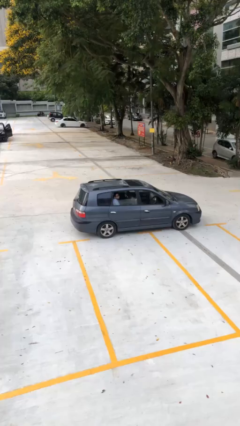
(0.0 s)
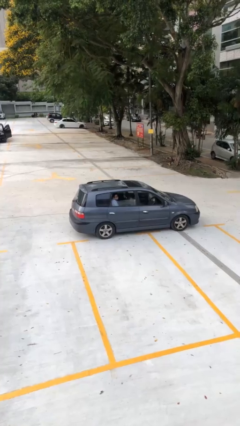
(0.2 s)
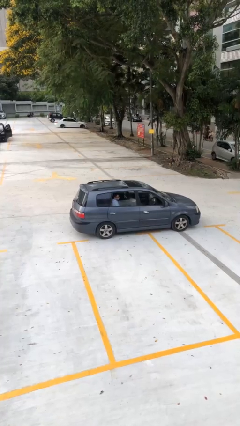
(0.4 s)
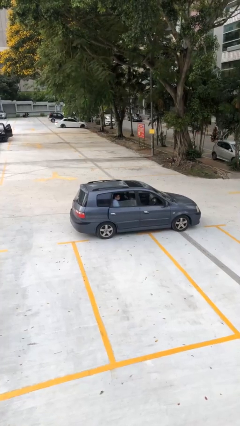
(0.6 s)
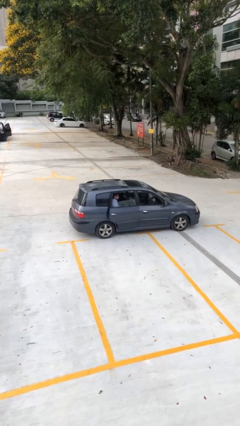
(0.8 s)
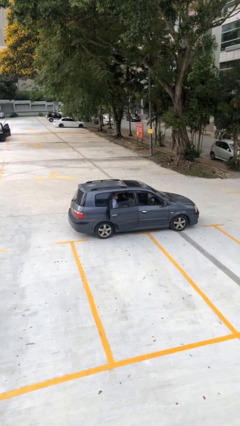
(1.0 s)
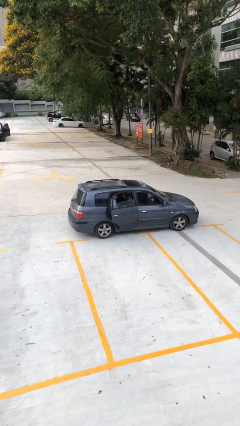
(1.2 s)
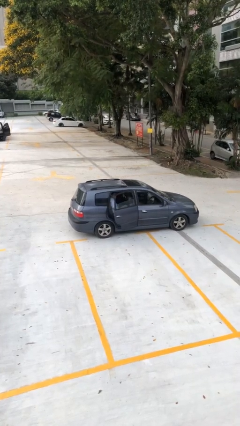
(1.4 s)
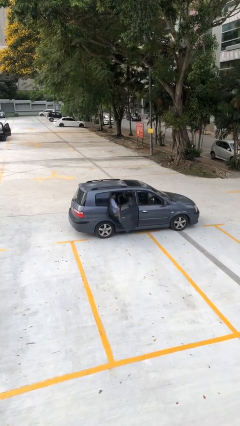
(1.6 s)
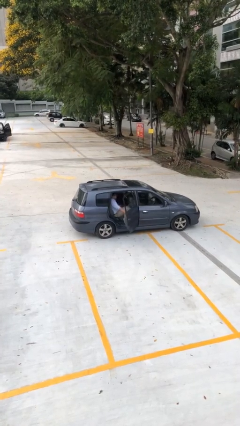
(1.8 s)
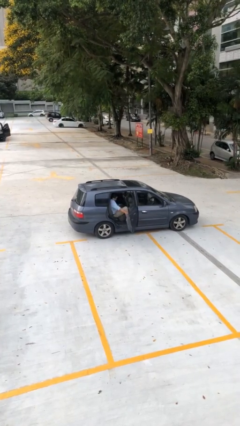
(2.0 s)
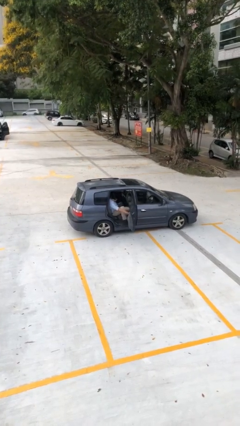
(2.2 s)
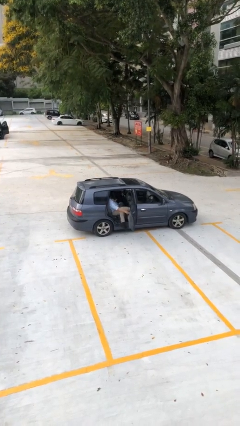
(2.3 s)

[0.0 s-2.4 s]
person opens car door

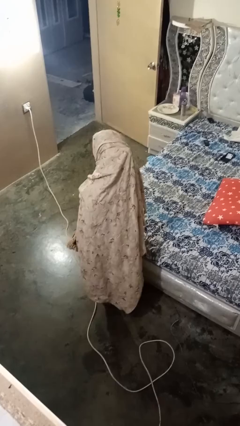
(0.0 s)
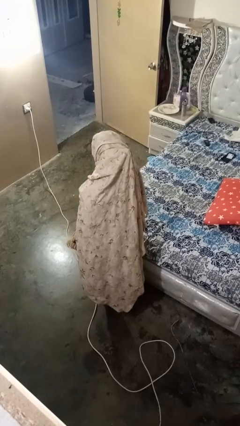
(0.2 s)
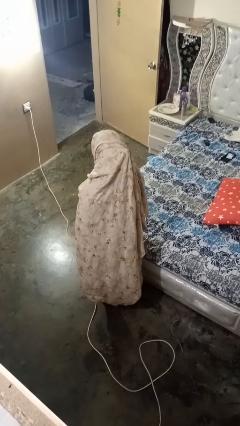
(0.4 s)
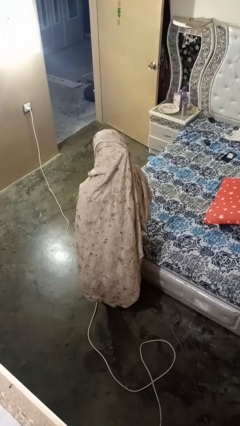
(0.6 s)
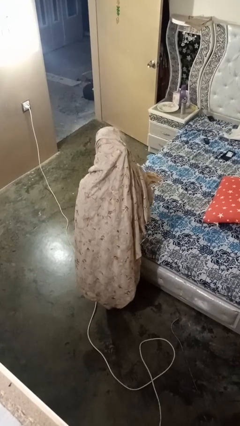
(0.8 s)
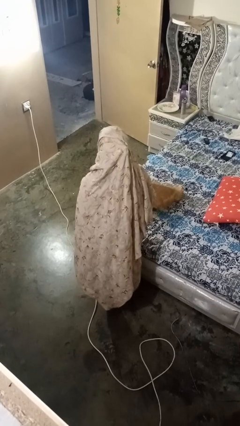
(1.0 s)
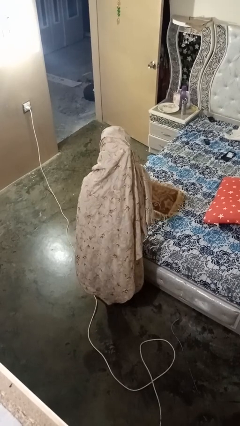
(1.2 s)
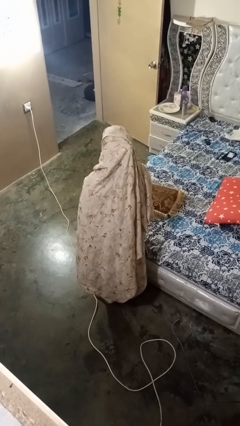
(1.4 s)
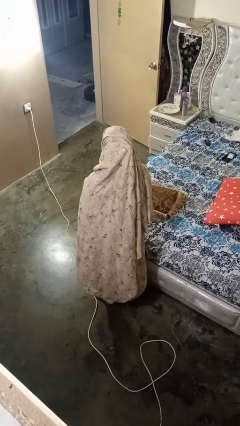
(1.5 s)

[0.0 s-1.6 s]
person puts down object on bed

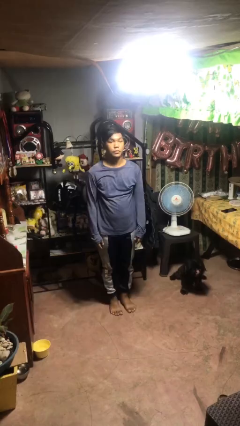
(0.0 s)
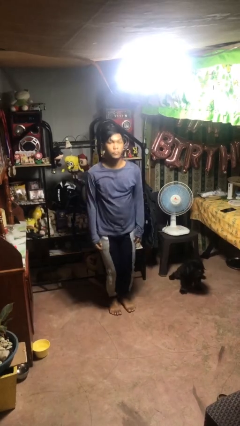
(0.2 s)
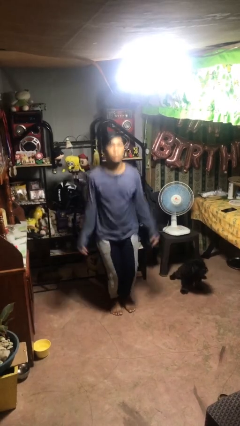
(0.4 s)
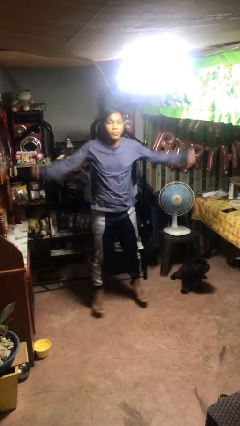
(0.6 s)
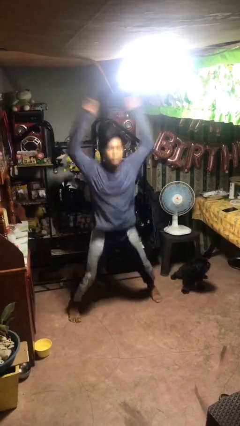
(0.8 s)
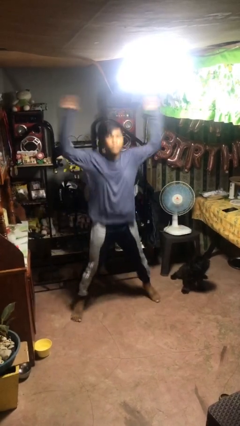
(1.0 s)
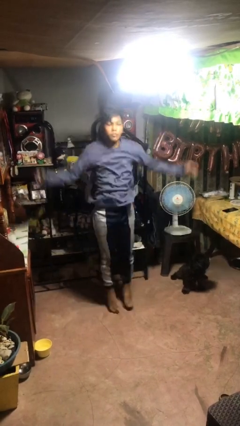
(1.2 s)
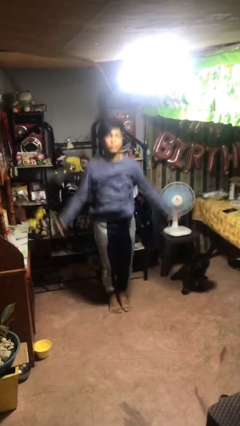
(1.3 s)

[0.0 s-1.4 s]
person exercises with jumping jacks

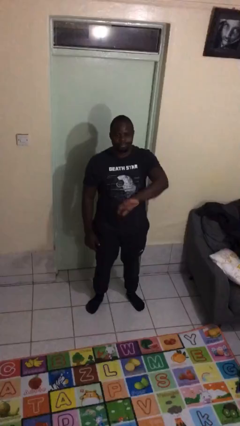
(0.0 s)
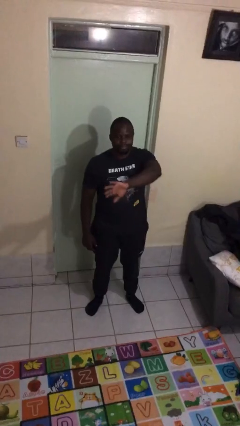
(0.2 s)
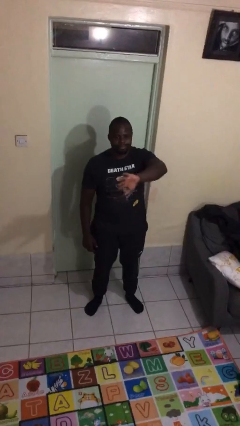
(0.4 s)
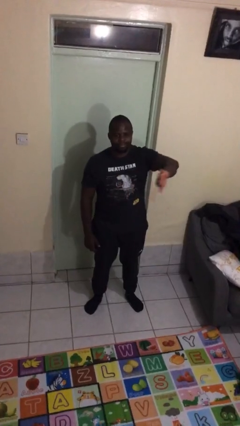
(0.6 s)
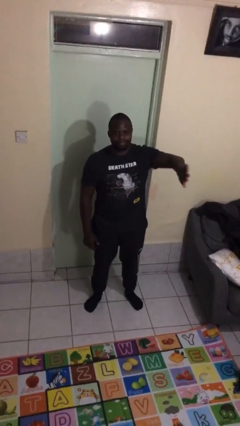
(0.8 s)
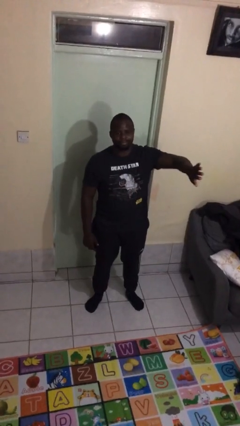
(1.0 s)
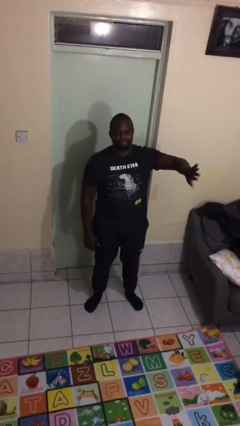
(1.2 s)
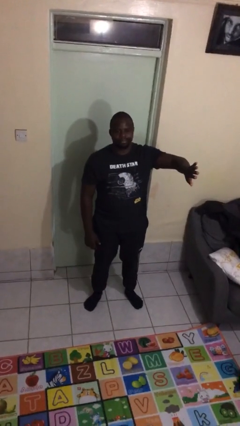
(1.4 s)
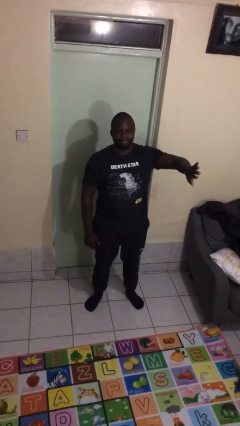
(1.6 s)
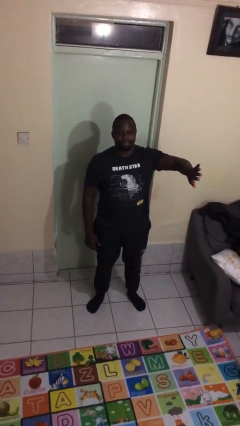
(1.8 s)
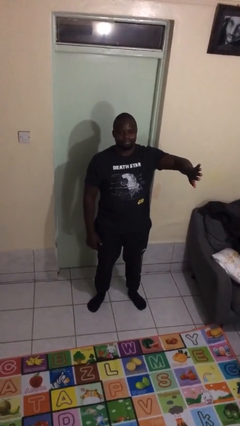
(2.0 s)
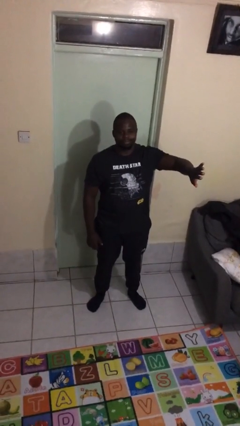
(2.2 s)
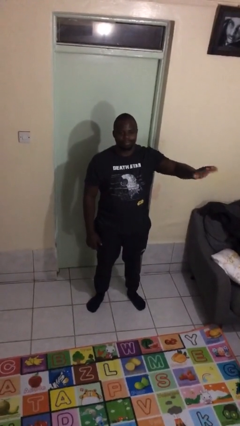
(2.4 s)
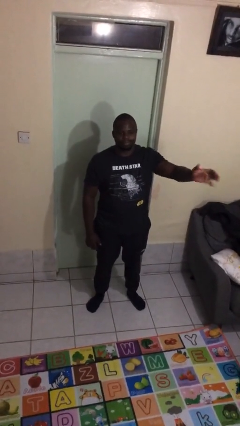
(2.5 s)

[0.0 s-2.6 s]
person gestures swipe left

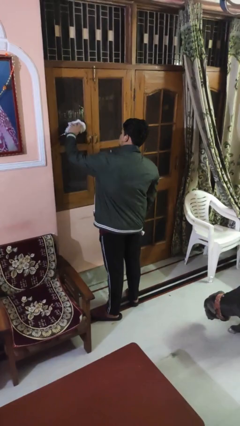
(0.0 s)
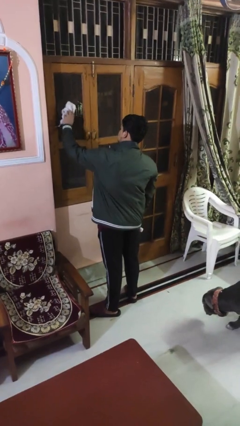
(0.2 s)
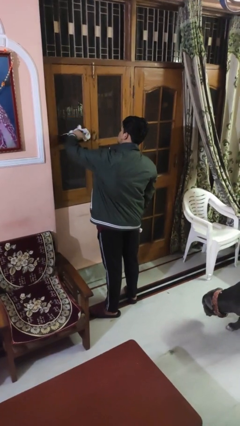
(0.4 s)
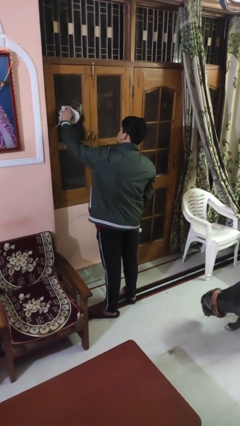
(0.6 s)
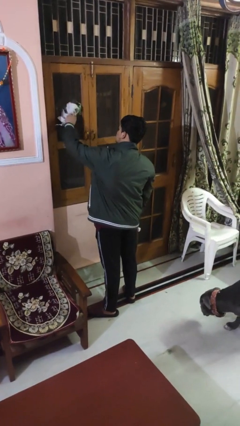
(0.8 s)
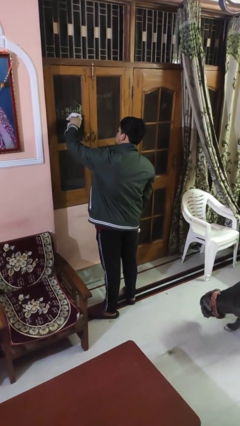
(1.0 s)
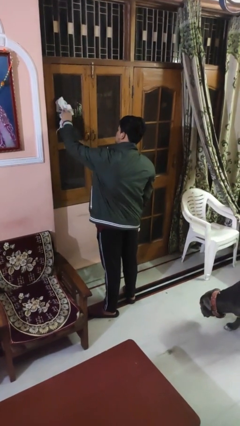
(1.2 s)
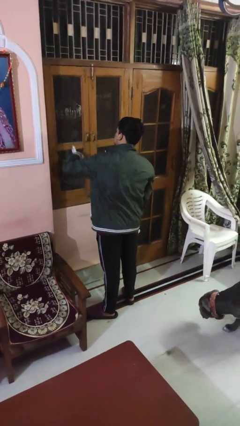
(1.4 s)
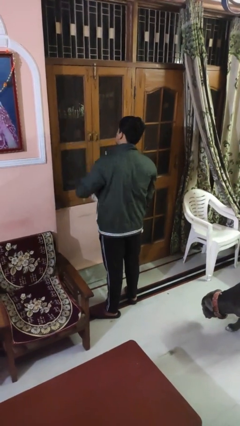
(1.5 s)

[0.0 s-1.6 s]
person washes window

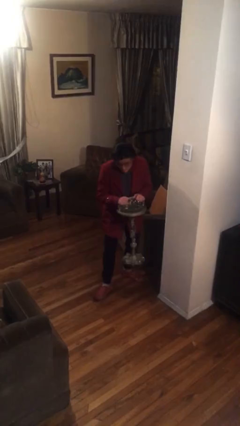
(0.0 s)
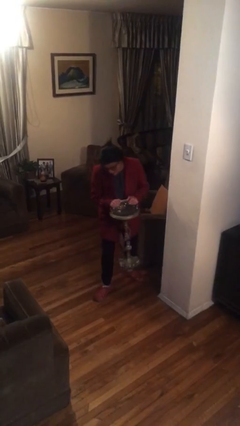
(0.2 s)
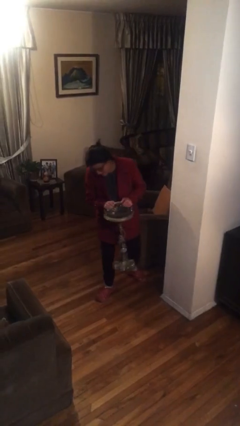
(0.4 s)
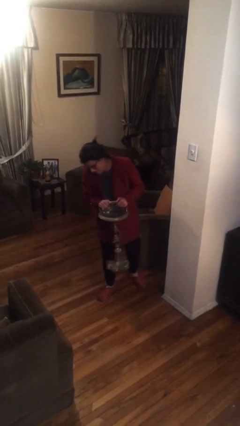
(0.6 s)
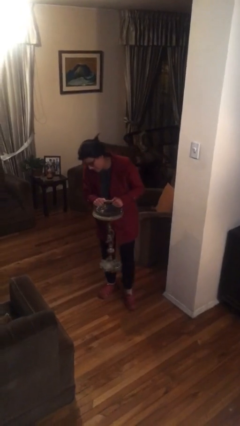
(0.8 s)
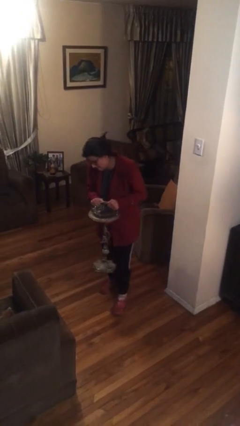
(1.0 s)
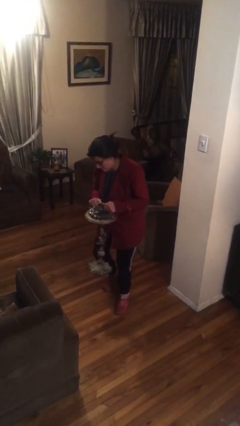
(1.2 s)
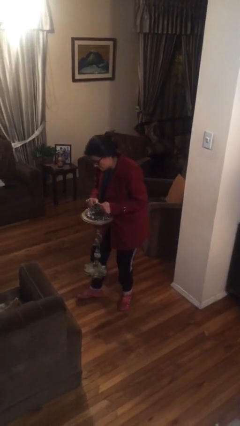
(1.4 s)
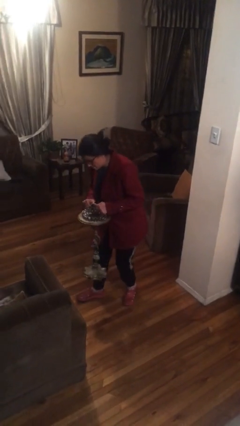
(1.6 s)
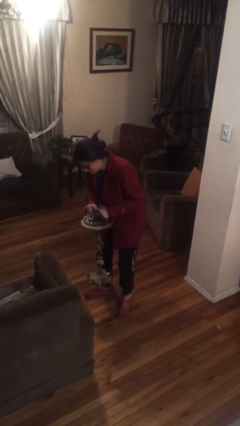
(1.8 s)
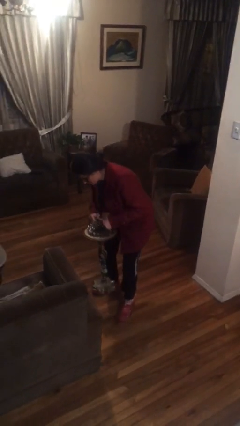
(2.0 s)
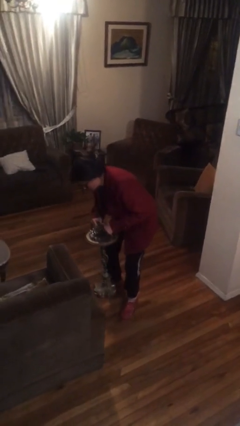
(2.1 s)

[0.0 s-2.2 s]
person carries heavy object

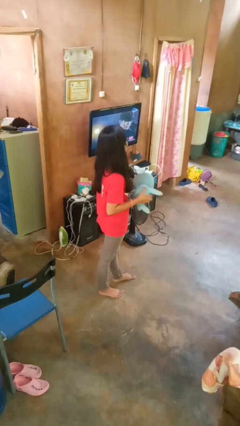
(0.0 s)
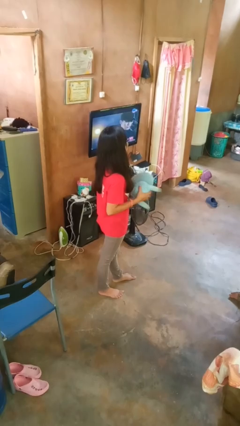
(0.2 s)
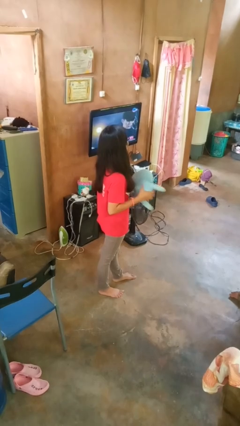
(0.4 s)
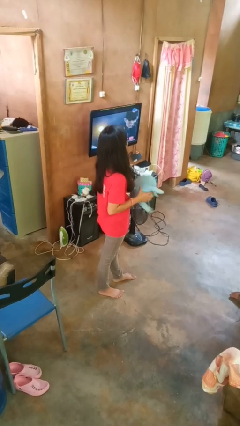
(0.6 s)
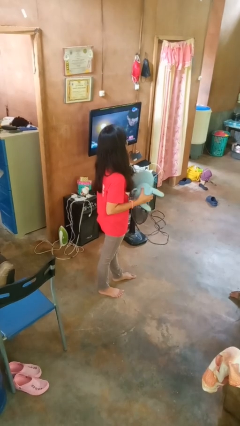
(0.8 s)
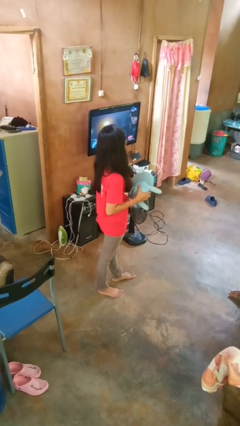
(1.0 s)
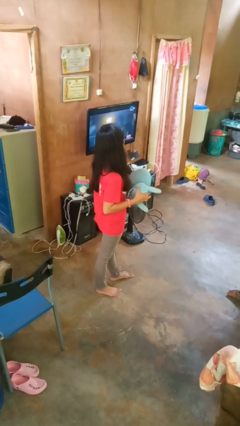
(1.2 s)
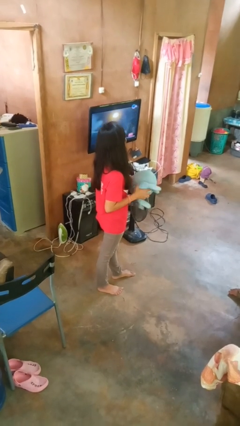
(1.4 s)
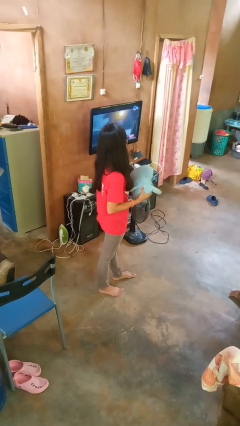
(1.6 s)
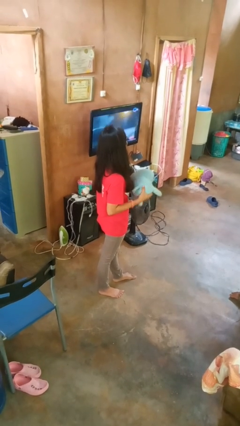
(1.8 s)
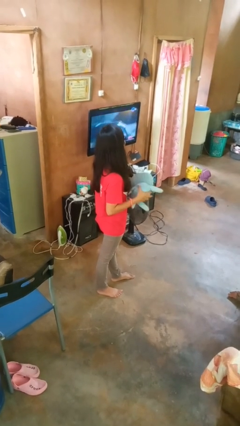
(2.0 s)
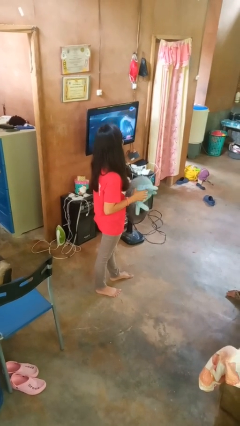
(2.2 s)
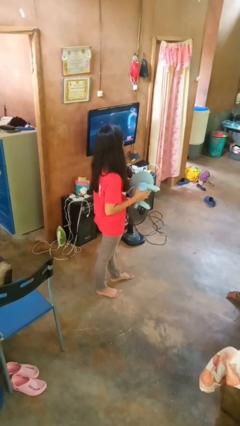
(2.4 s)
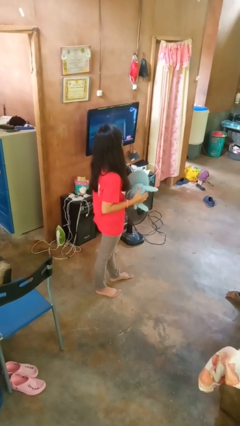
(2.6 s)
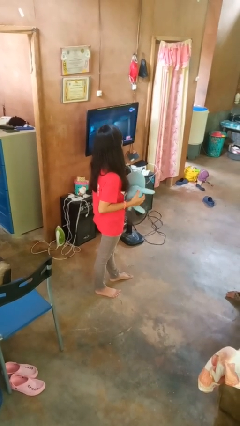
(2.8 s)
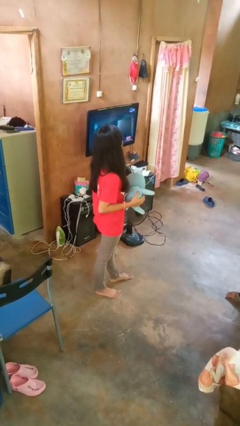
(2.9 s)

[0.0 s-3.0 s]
person squeezes object

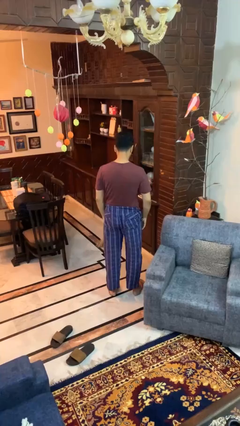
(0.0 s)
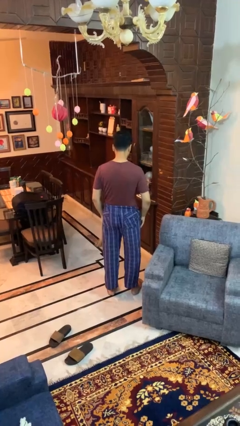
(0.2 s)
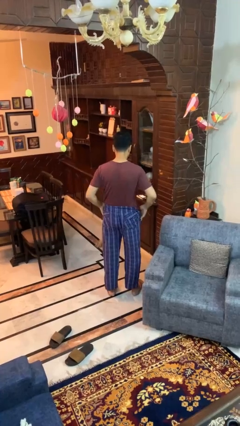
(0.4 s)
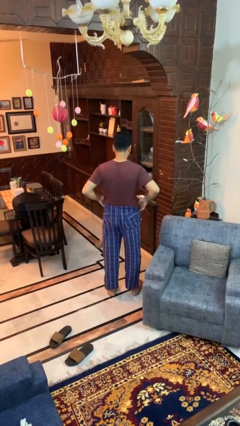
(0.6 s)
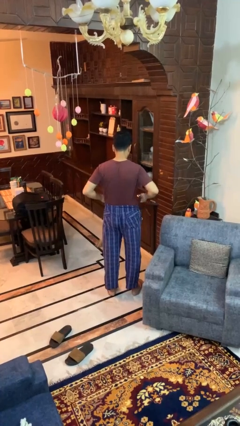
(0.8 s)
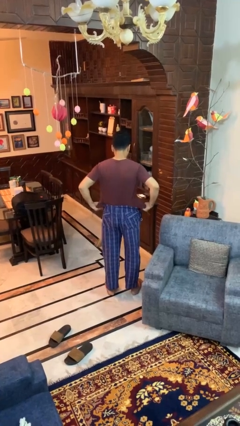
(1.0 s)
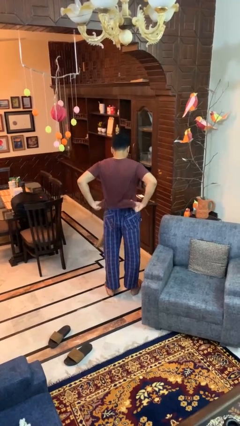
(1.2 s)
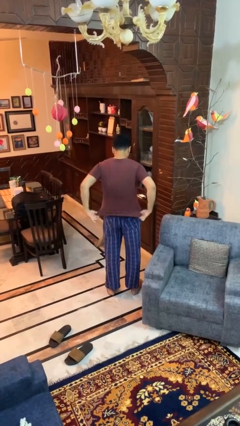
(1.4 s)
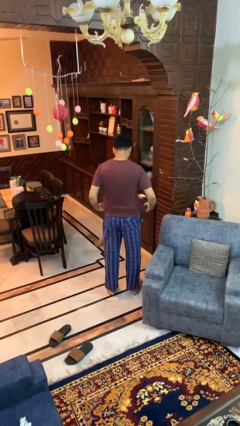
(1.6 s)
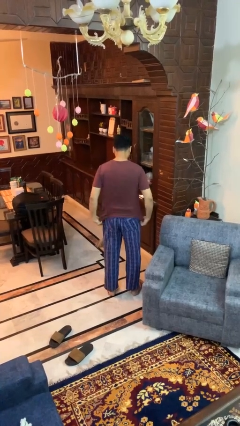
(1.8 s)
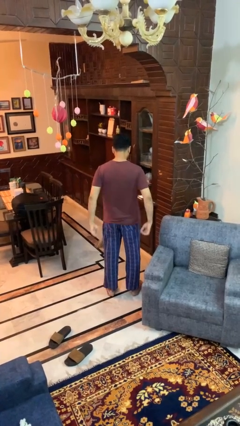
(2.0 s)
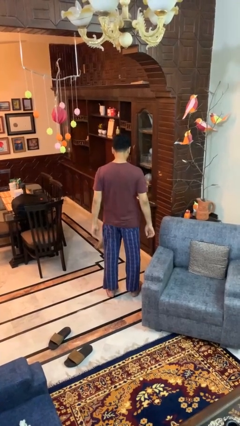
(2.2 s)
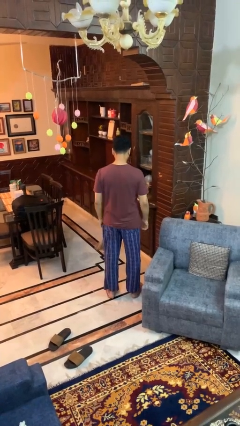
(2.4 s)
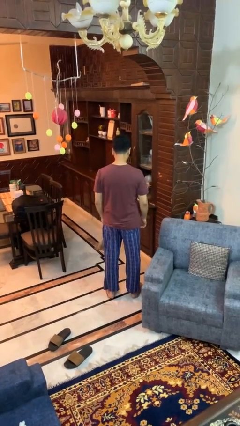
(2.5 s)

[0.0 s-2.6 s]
person untucks shirt
